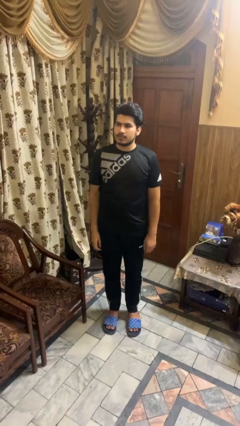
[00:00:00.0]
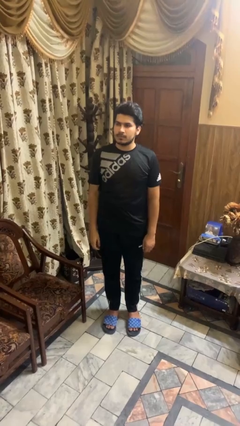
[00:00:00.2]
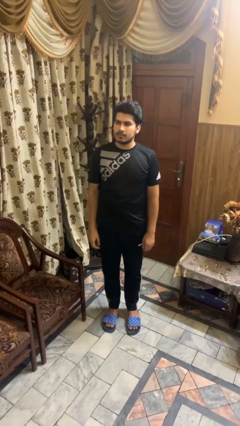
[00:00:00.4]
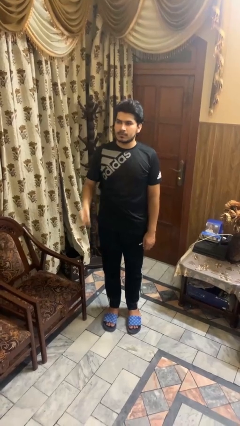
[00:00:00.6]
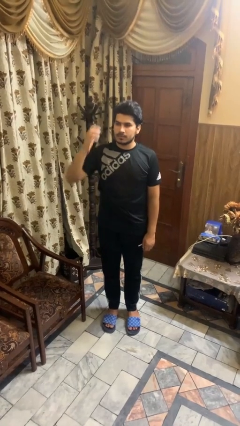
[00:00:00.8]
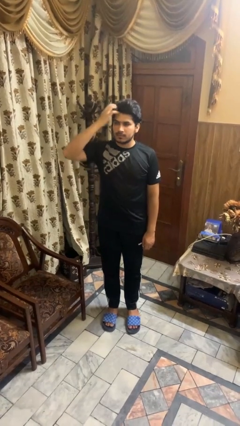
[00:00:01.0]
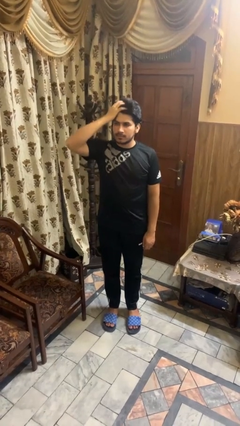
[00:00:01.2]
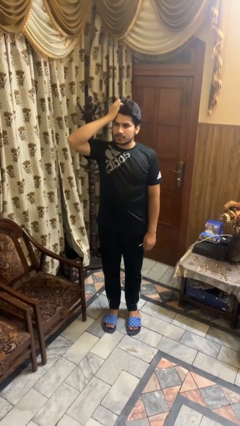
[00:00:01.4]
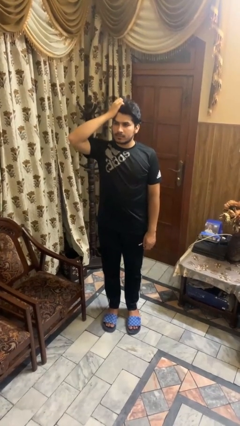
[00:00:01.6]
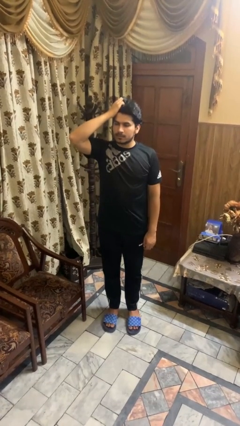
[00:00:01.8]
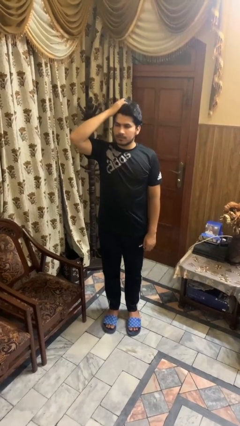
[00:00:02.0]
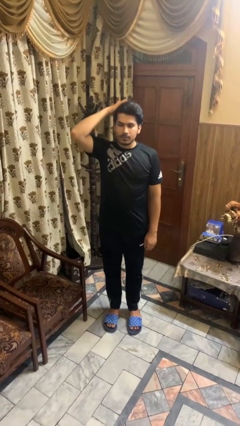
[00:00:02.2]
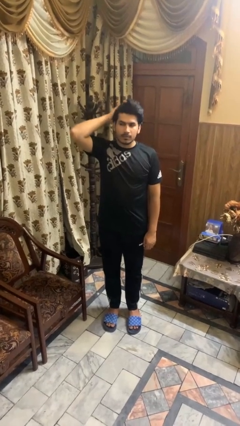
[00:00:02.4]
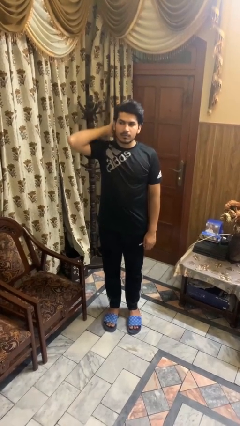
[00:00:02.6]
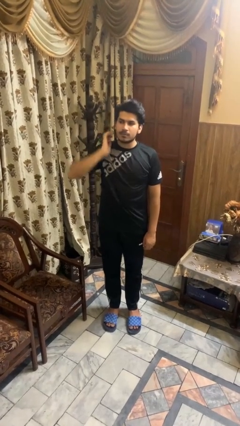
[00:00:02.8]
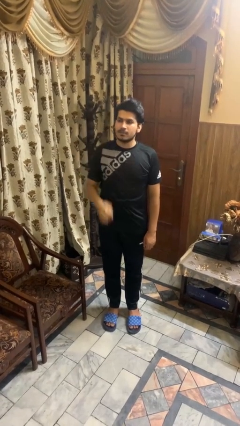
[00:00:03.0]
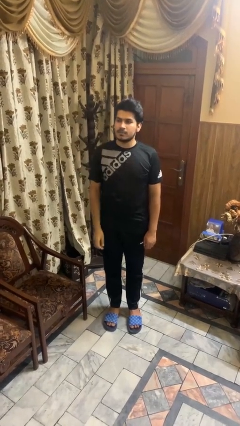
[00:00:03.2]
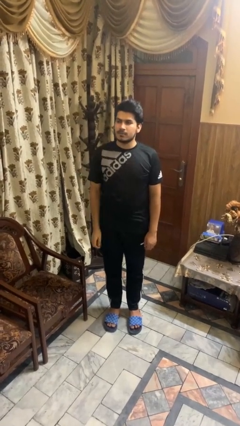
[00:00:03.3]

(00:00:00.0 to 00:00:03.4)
person scratches face

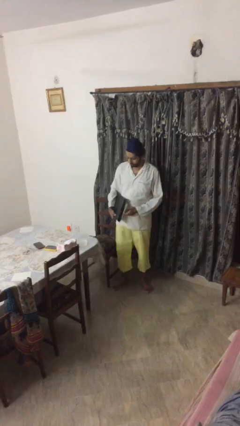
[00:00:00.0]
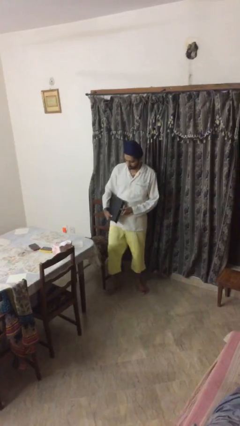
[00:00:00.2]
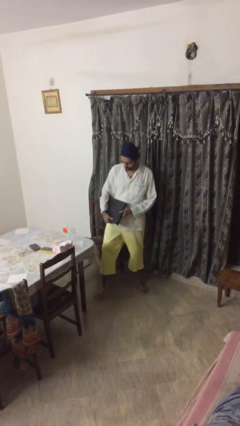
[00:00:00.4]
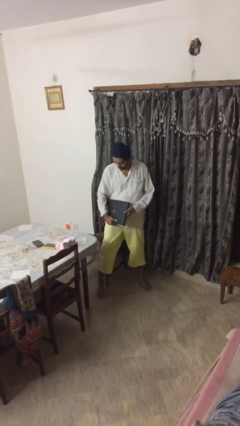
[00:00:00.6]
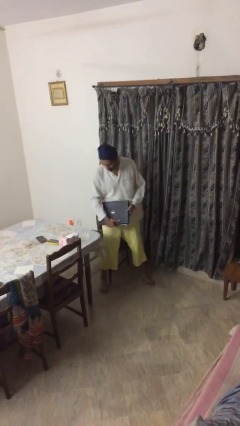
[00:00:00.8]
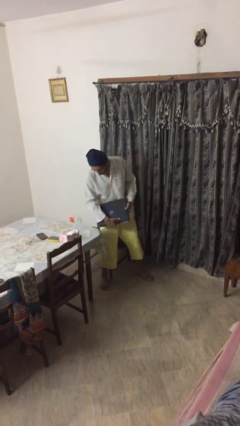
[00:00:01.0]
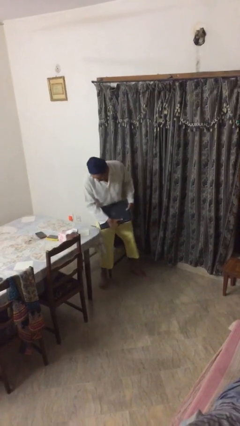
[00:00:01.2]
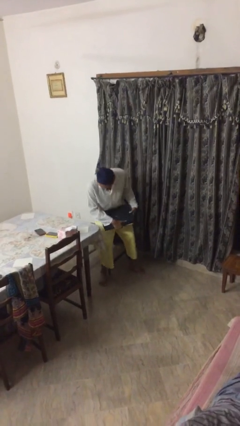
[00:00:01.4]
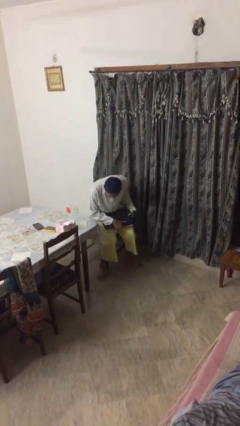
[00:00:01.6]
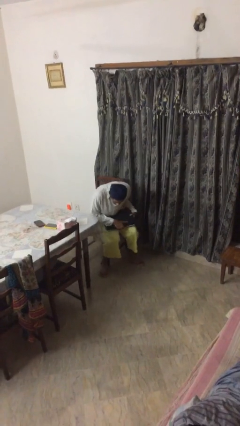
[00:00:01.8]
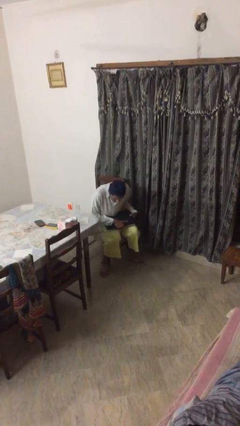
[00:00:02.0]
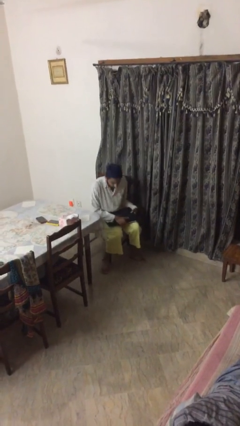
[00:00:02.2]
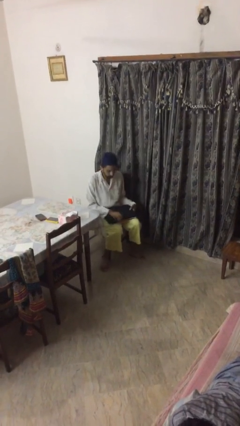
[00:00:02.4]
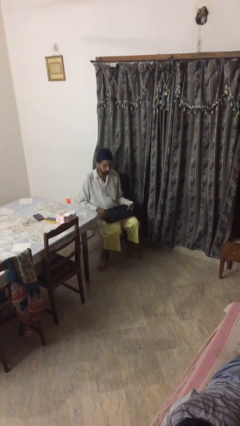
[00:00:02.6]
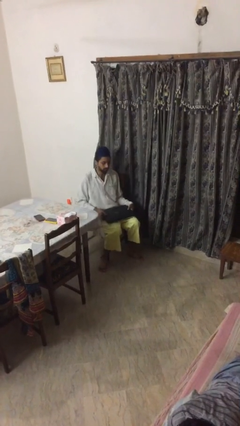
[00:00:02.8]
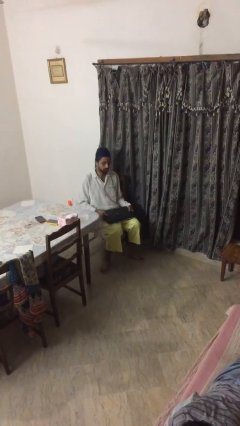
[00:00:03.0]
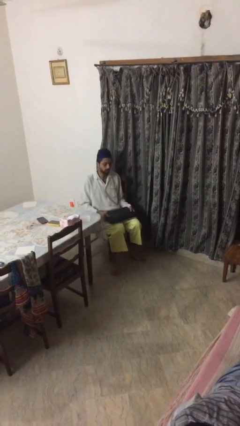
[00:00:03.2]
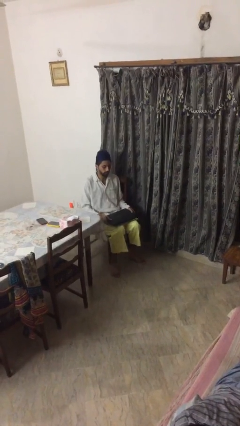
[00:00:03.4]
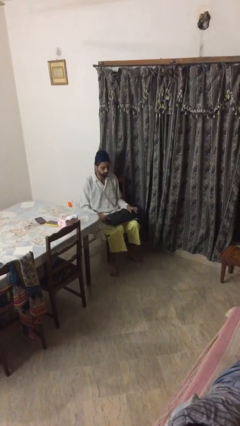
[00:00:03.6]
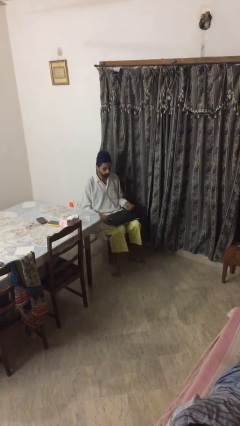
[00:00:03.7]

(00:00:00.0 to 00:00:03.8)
person sits down

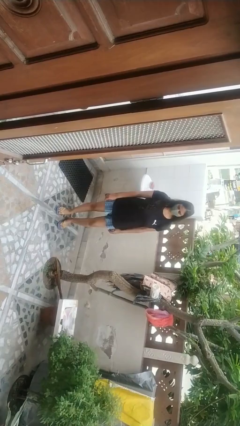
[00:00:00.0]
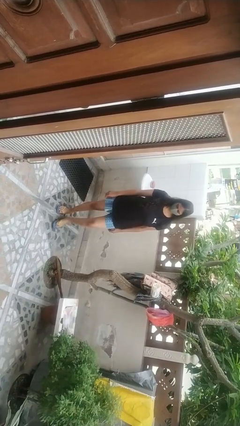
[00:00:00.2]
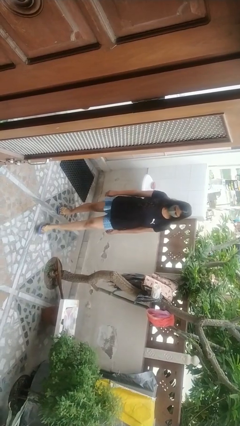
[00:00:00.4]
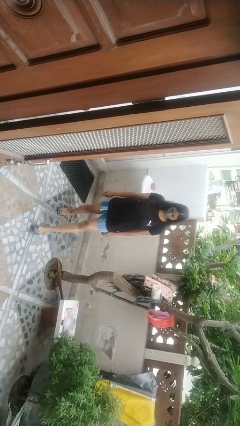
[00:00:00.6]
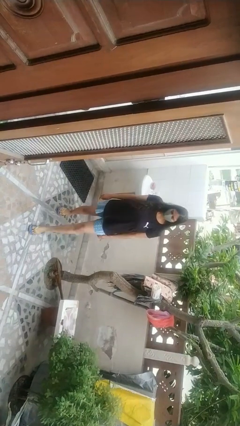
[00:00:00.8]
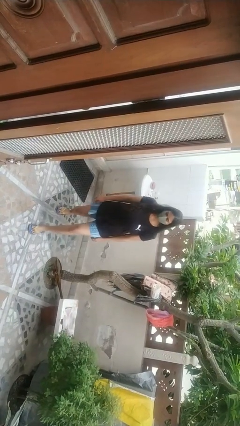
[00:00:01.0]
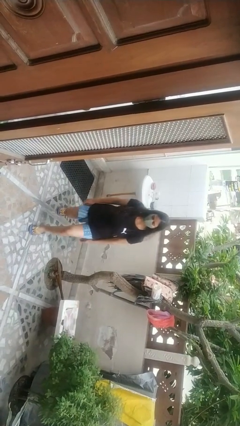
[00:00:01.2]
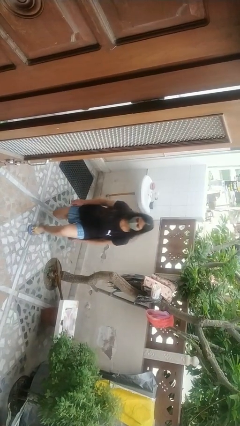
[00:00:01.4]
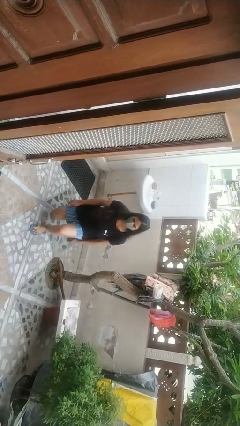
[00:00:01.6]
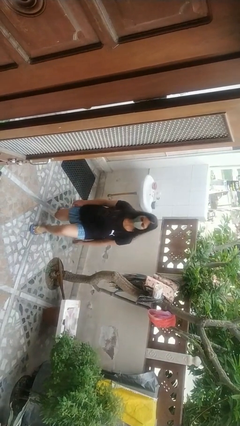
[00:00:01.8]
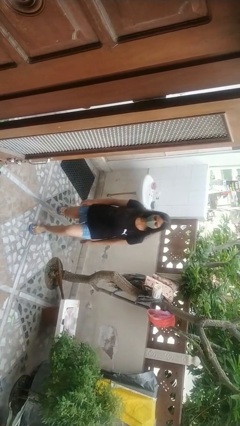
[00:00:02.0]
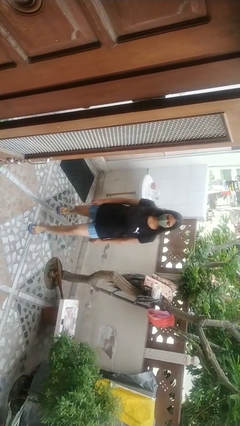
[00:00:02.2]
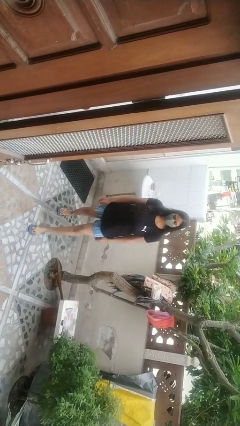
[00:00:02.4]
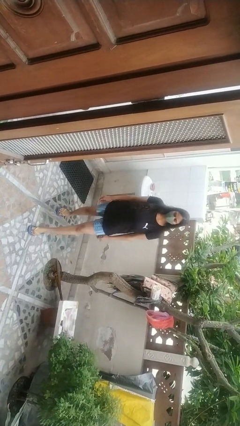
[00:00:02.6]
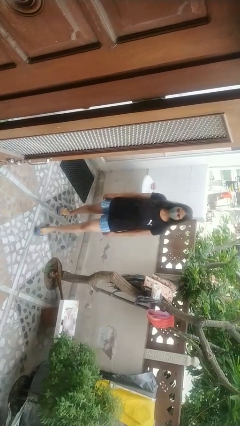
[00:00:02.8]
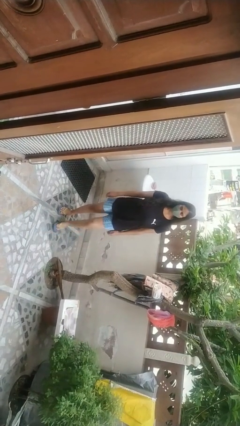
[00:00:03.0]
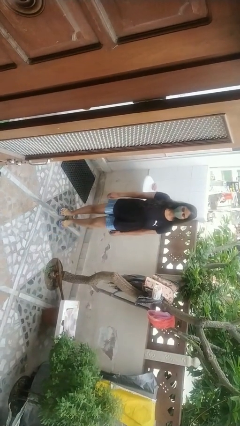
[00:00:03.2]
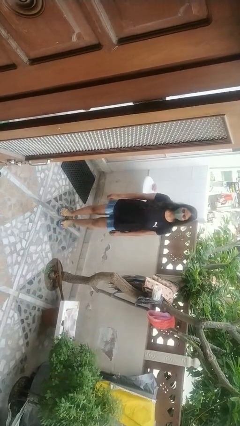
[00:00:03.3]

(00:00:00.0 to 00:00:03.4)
person exercises with lunges

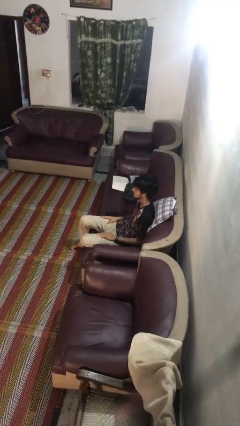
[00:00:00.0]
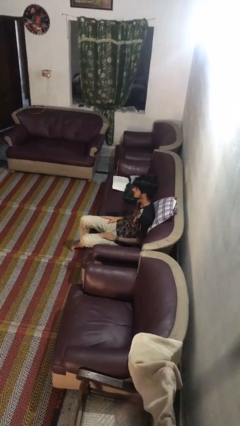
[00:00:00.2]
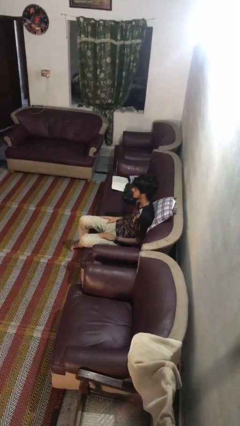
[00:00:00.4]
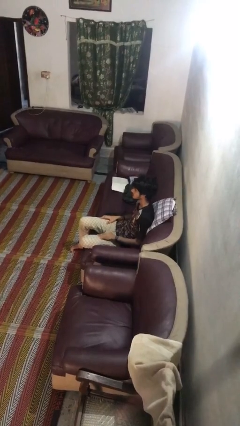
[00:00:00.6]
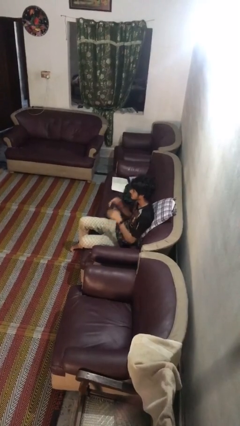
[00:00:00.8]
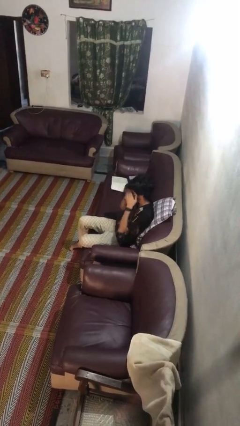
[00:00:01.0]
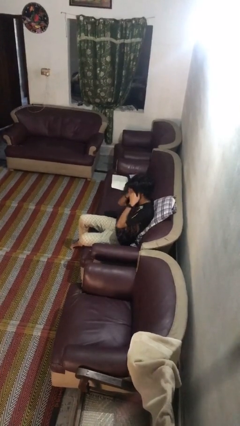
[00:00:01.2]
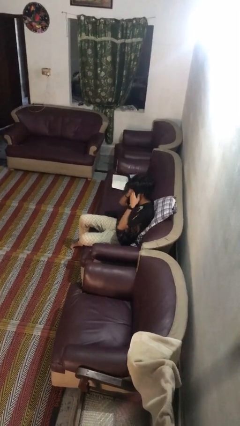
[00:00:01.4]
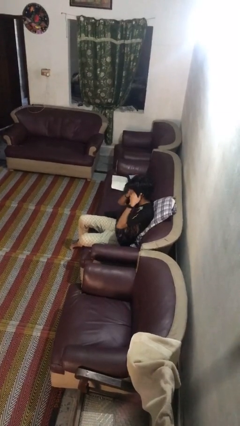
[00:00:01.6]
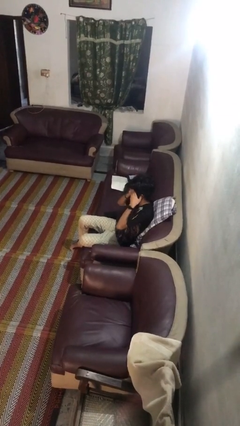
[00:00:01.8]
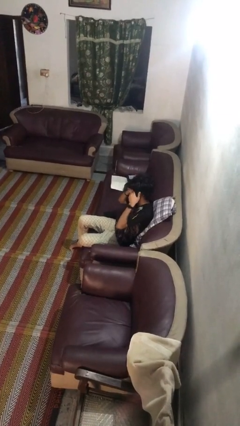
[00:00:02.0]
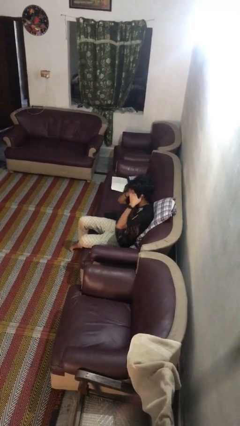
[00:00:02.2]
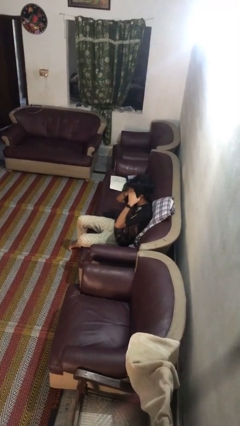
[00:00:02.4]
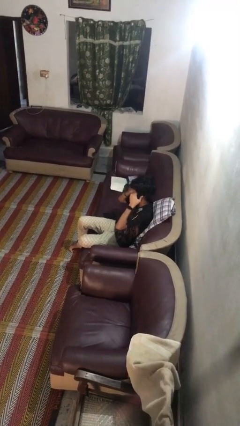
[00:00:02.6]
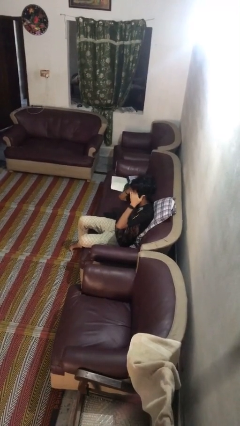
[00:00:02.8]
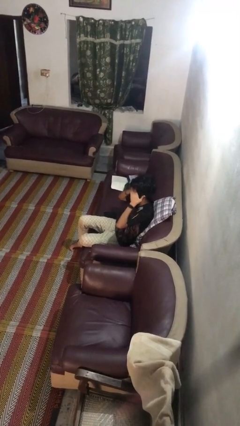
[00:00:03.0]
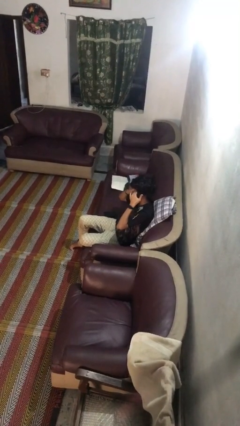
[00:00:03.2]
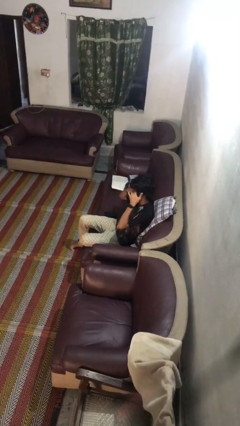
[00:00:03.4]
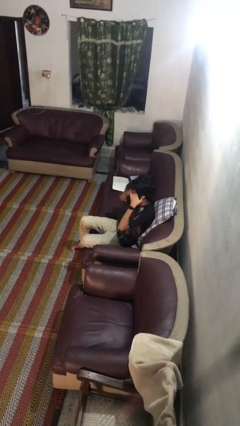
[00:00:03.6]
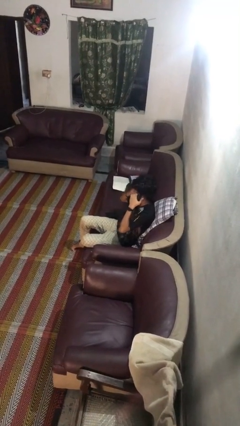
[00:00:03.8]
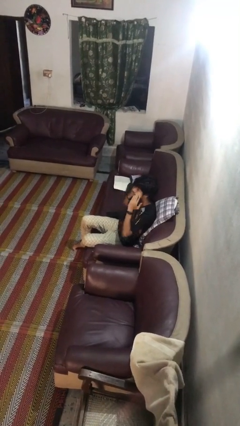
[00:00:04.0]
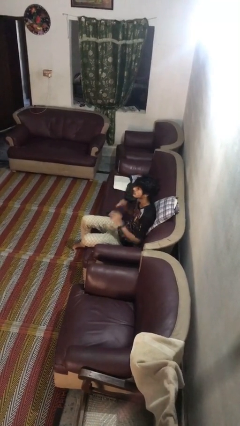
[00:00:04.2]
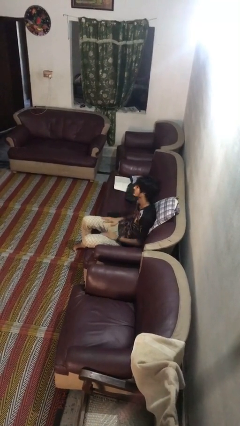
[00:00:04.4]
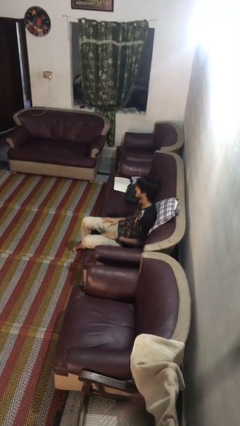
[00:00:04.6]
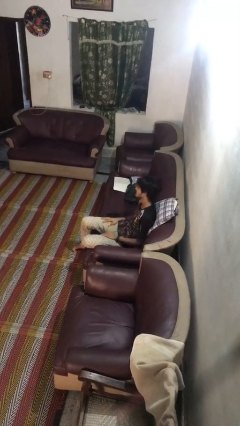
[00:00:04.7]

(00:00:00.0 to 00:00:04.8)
person rubs eyes

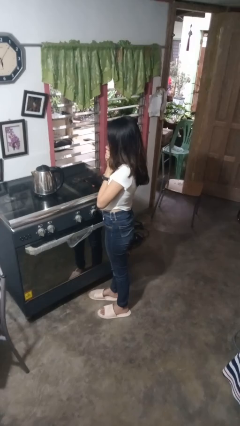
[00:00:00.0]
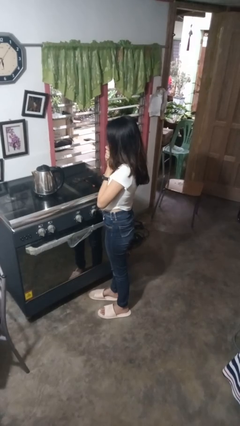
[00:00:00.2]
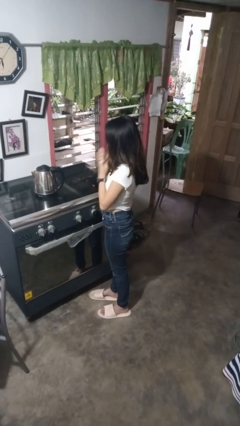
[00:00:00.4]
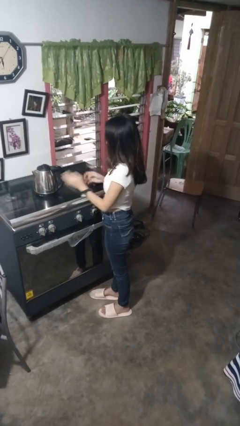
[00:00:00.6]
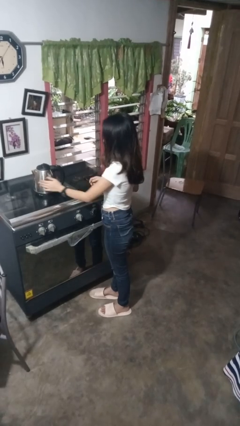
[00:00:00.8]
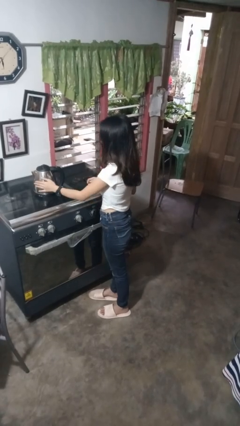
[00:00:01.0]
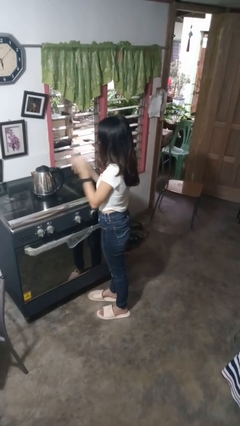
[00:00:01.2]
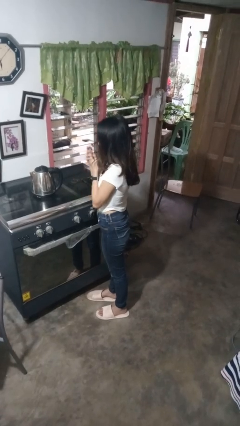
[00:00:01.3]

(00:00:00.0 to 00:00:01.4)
person burns hand

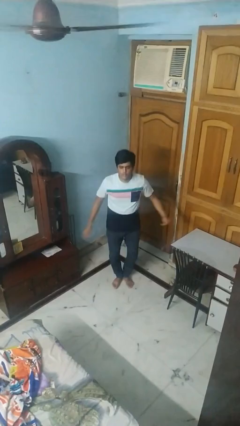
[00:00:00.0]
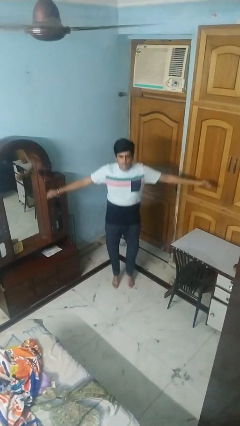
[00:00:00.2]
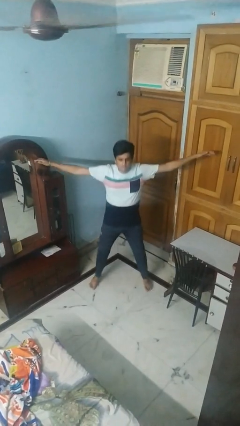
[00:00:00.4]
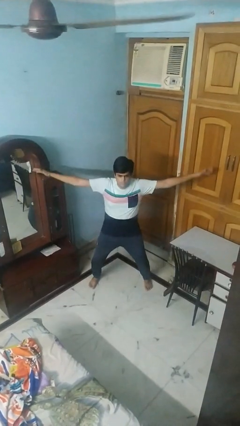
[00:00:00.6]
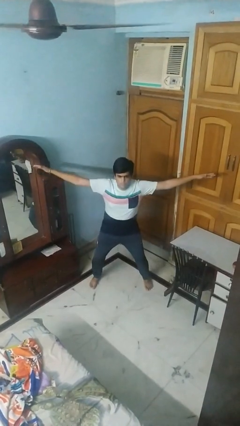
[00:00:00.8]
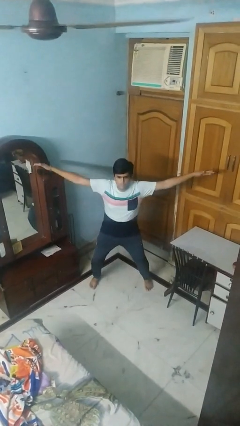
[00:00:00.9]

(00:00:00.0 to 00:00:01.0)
person exercises with jumping jacks
